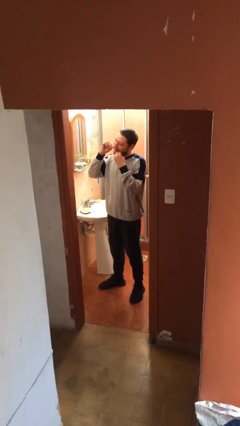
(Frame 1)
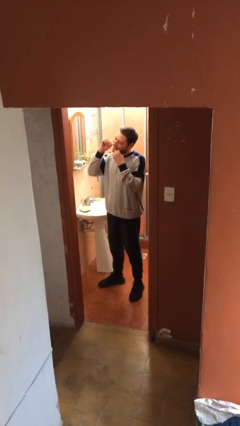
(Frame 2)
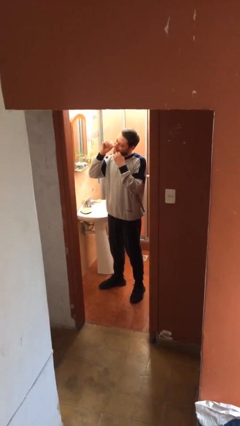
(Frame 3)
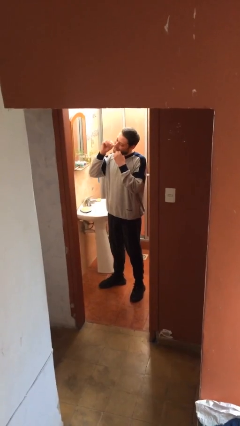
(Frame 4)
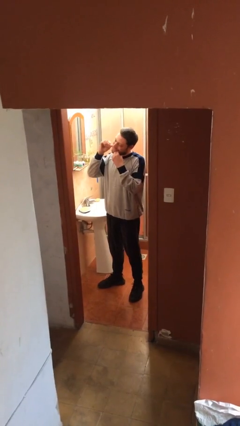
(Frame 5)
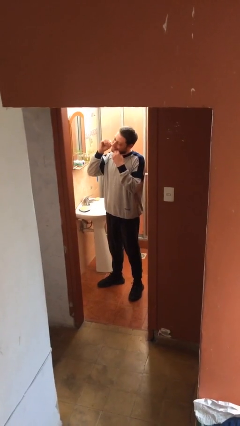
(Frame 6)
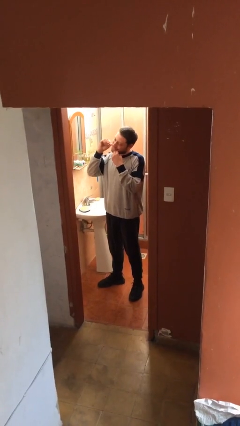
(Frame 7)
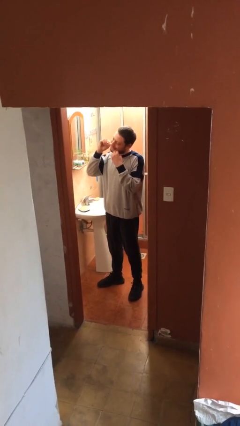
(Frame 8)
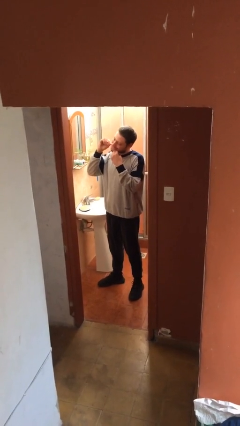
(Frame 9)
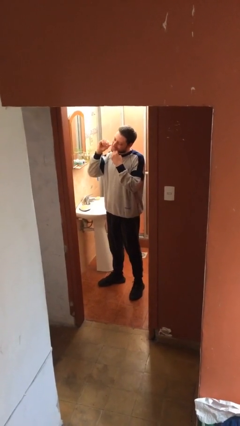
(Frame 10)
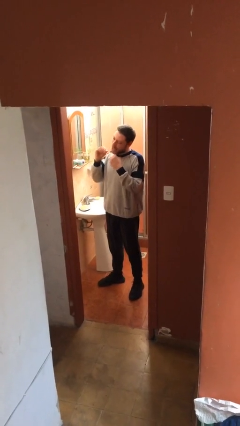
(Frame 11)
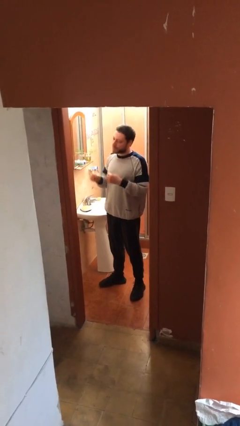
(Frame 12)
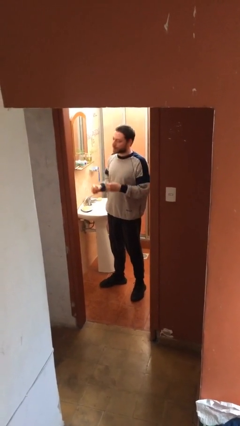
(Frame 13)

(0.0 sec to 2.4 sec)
person flosses

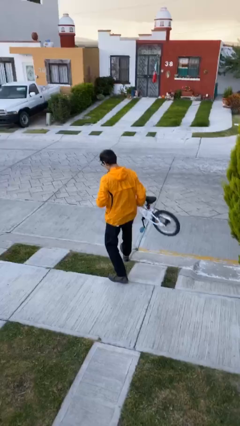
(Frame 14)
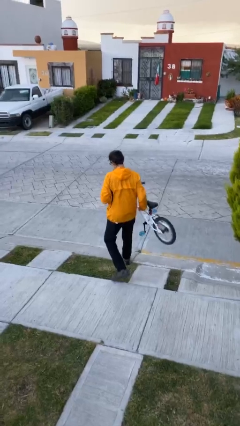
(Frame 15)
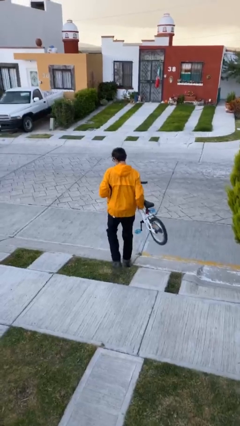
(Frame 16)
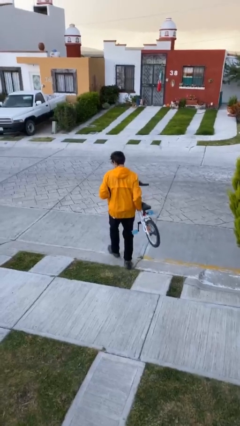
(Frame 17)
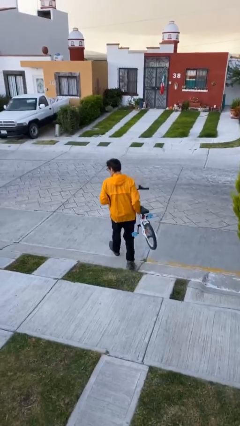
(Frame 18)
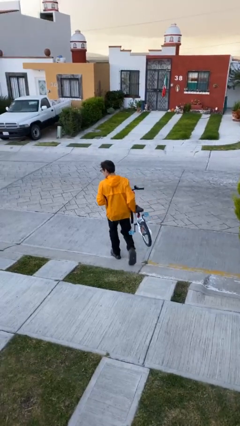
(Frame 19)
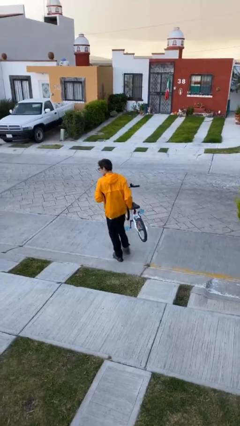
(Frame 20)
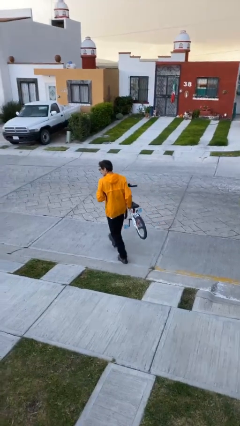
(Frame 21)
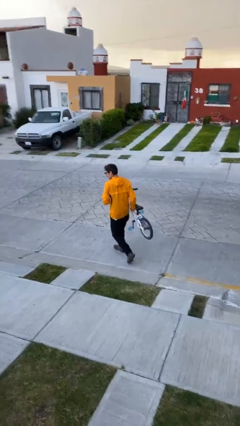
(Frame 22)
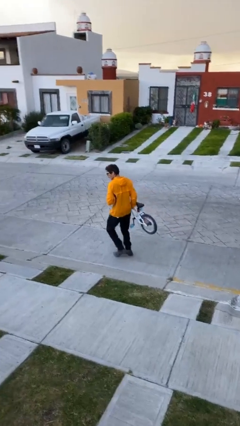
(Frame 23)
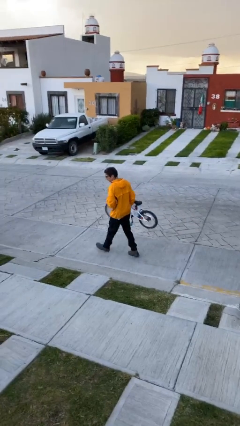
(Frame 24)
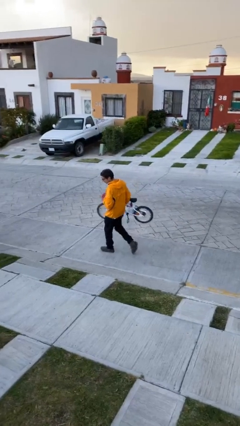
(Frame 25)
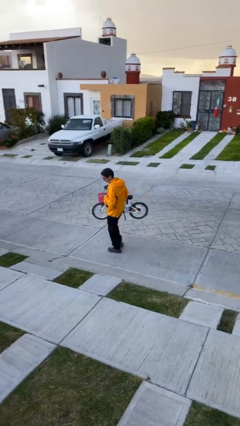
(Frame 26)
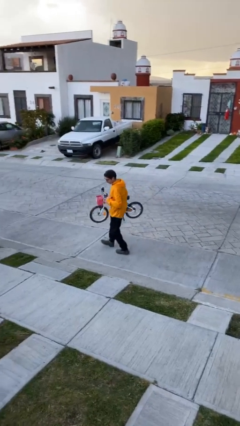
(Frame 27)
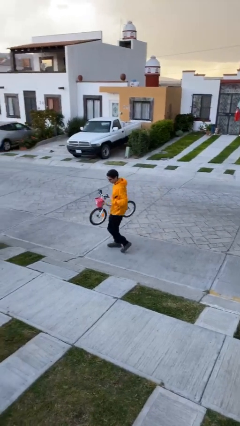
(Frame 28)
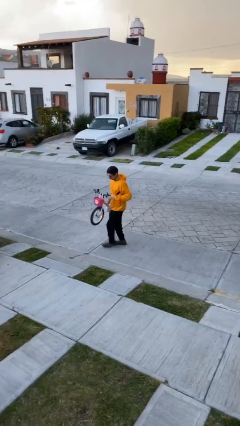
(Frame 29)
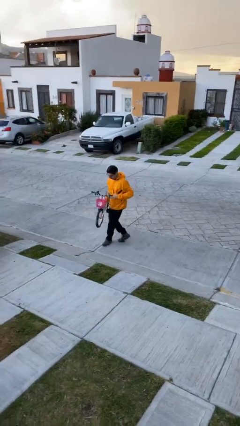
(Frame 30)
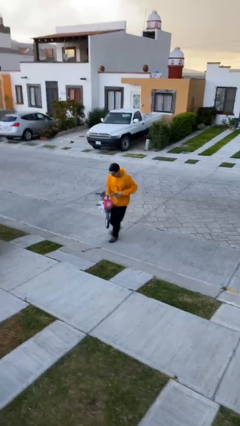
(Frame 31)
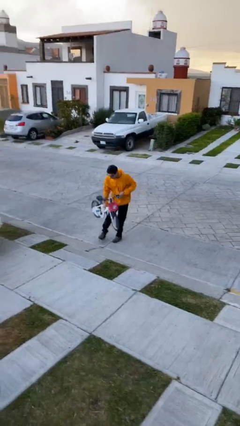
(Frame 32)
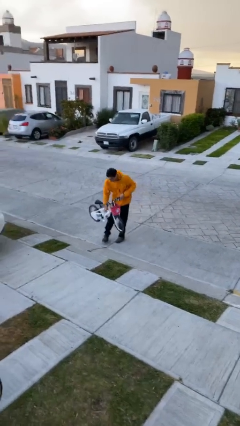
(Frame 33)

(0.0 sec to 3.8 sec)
person carries heavy object

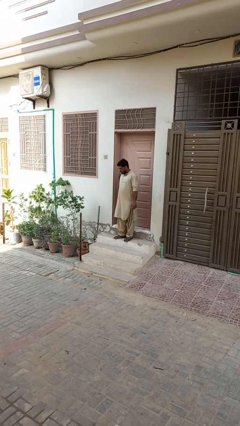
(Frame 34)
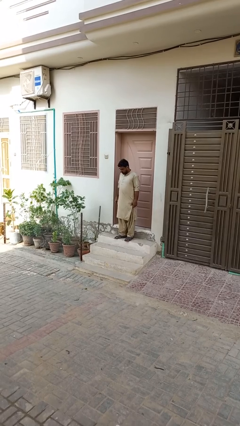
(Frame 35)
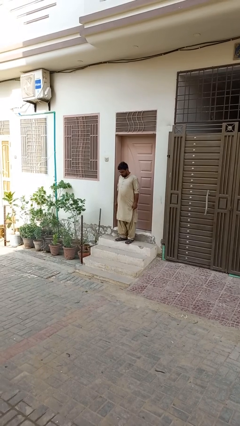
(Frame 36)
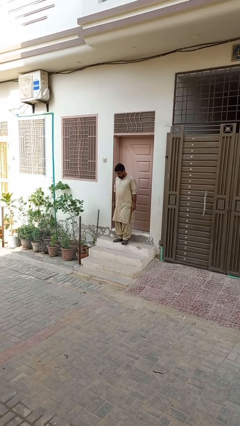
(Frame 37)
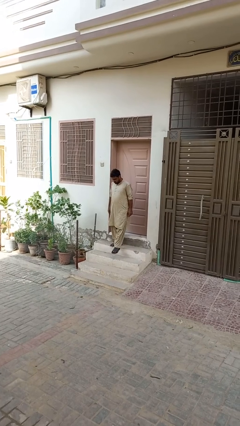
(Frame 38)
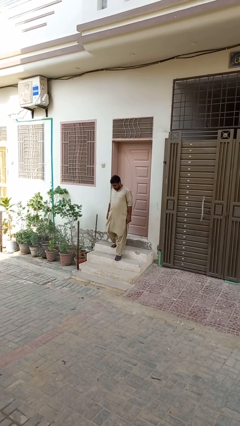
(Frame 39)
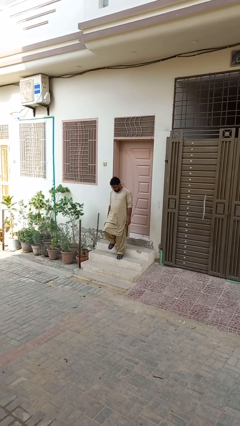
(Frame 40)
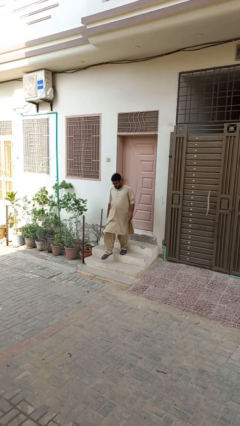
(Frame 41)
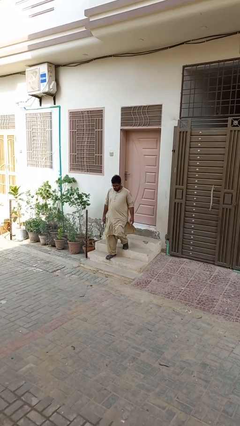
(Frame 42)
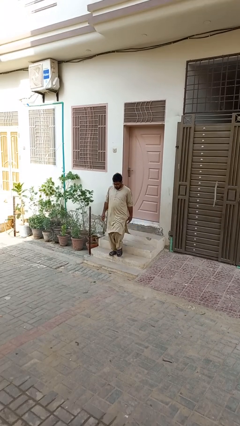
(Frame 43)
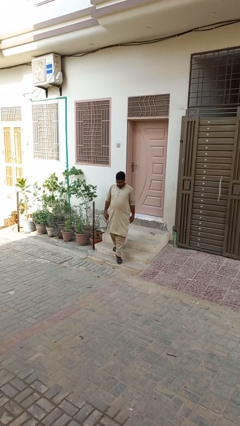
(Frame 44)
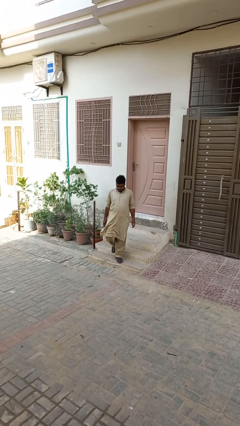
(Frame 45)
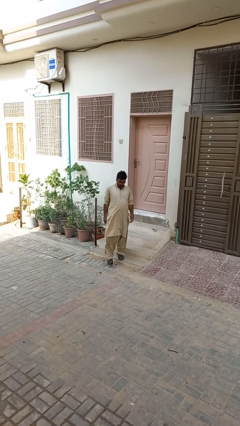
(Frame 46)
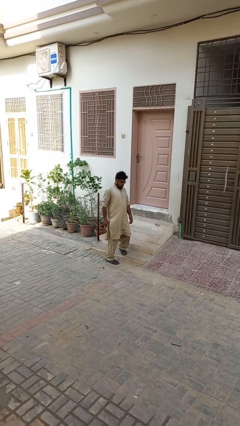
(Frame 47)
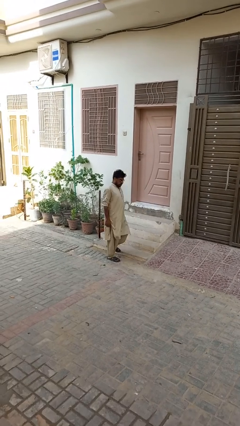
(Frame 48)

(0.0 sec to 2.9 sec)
person climbs down stairs

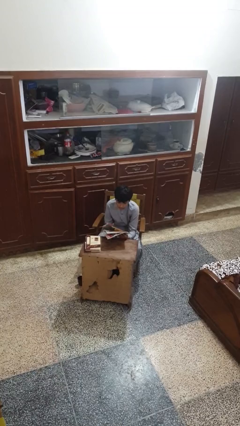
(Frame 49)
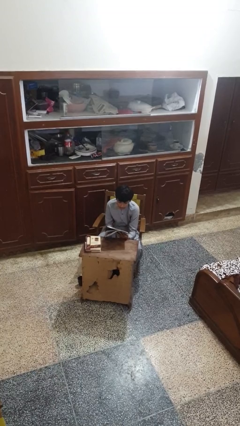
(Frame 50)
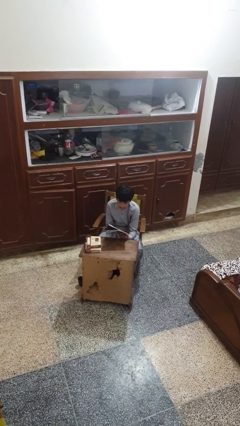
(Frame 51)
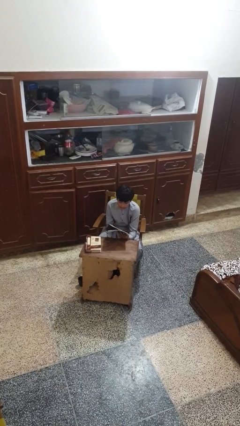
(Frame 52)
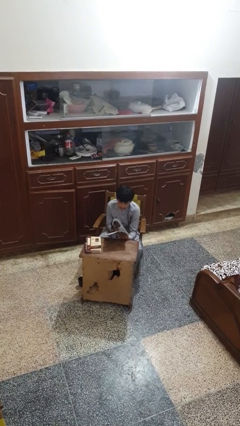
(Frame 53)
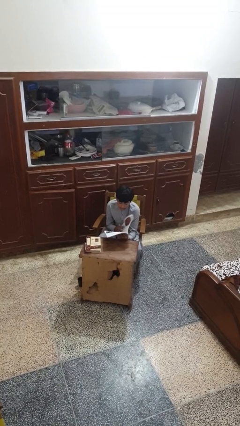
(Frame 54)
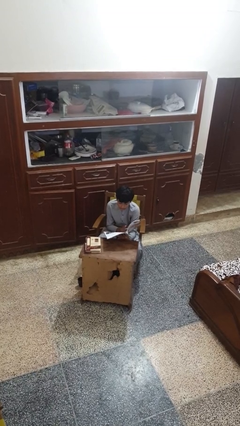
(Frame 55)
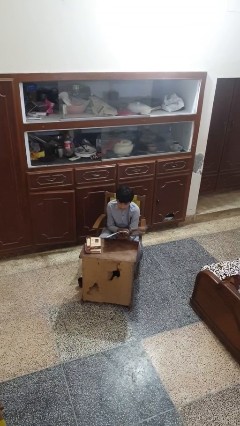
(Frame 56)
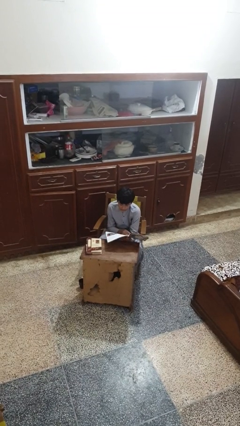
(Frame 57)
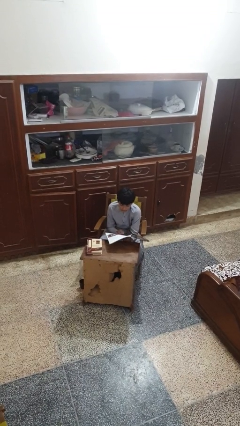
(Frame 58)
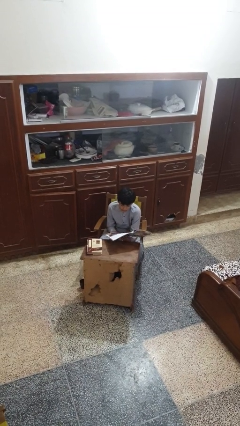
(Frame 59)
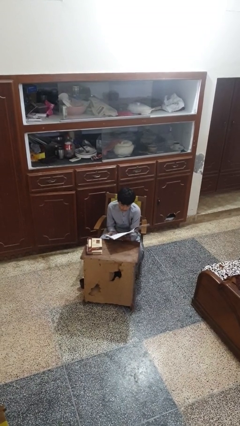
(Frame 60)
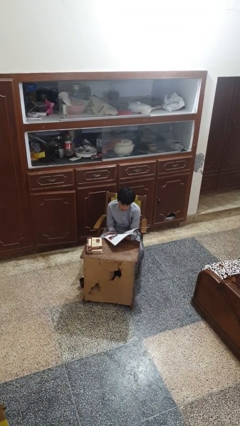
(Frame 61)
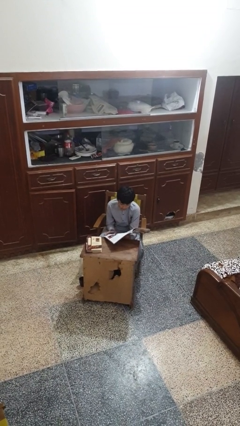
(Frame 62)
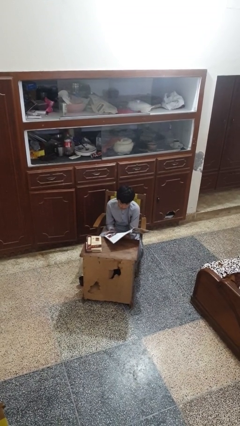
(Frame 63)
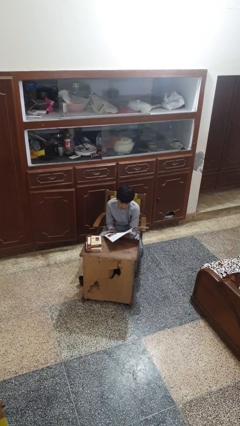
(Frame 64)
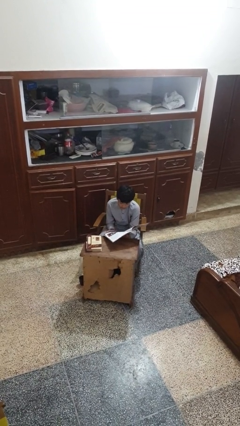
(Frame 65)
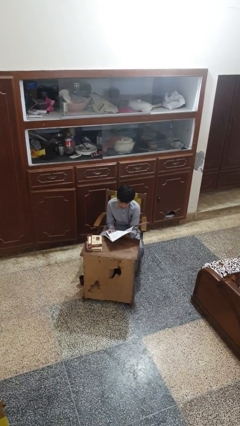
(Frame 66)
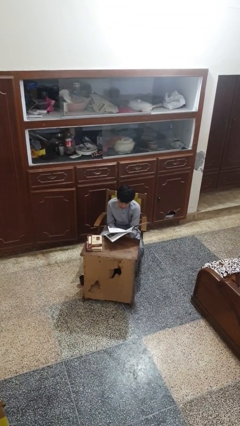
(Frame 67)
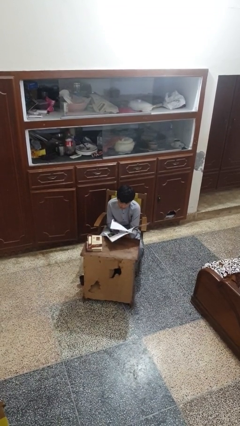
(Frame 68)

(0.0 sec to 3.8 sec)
person reads magazine

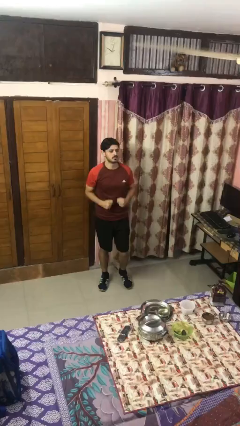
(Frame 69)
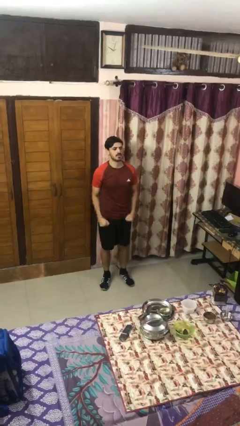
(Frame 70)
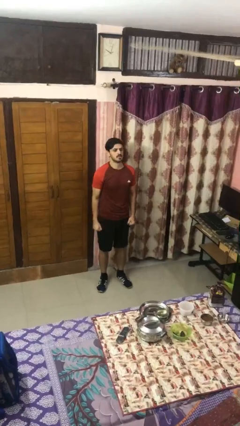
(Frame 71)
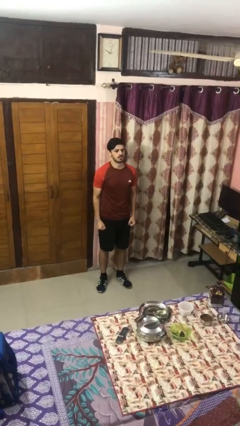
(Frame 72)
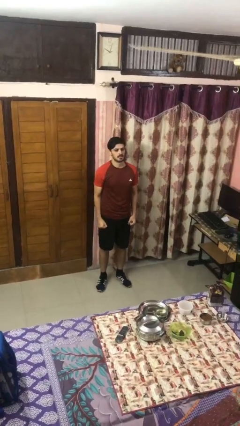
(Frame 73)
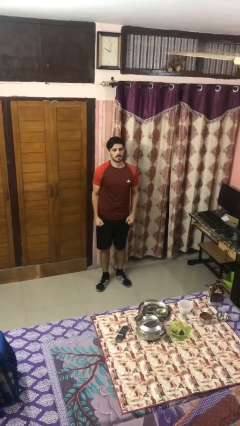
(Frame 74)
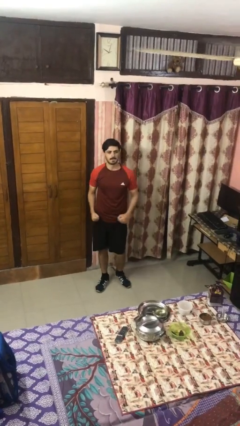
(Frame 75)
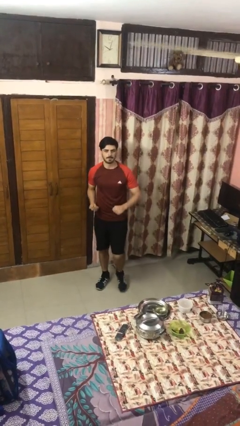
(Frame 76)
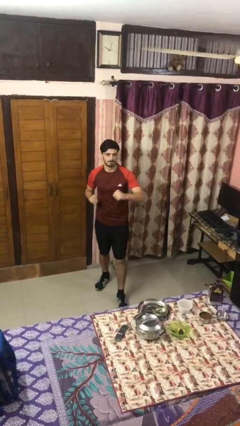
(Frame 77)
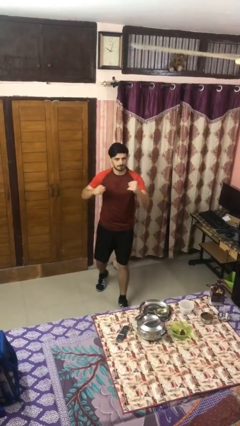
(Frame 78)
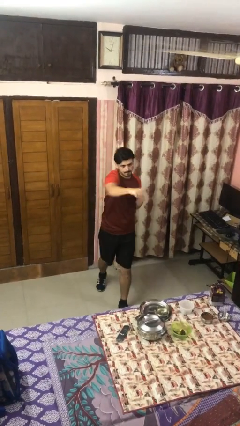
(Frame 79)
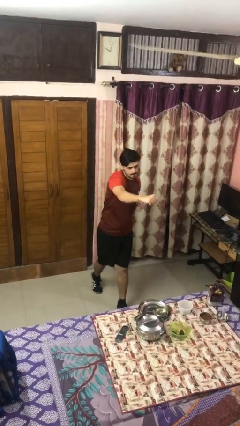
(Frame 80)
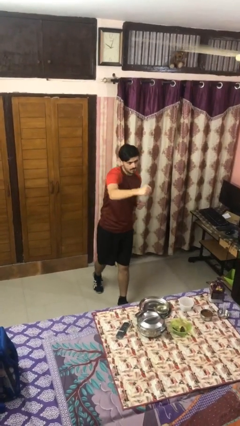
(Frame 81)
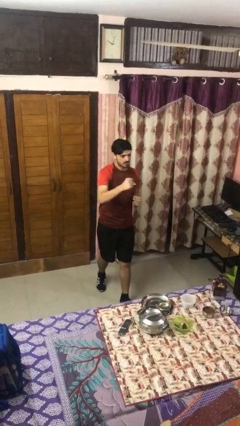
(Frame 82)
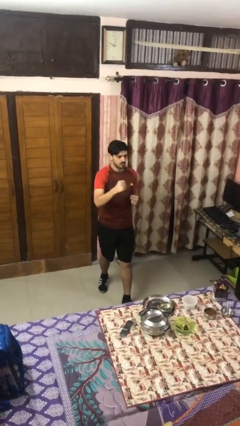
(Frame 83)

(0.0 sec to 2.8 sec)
person punches

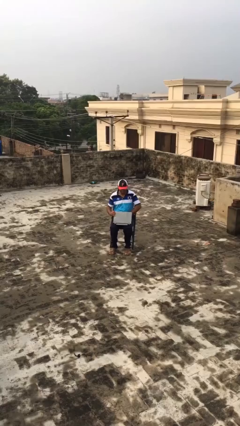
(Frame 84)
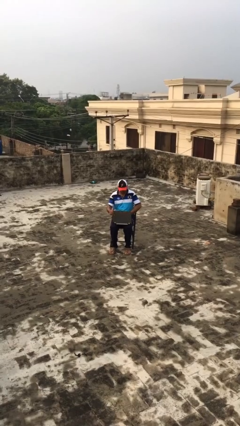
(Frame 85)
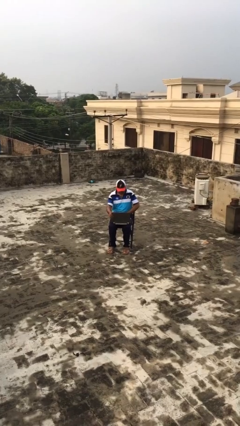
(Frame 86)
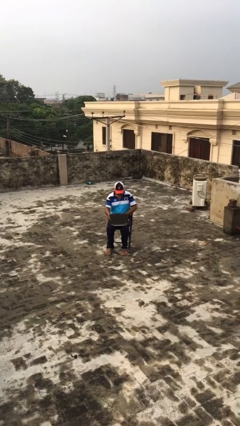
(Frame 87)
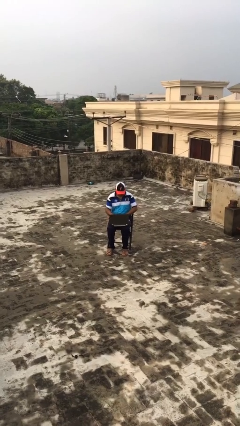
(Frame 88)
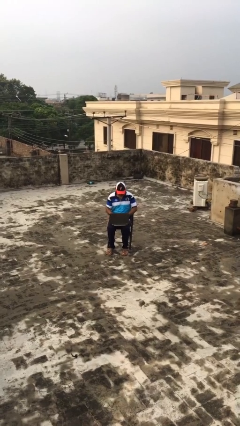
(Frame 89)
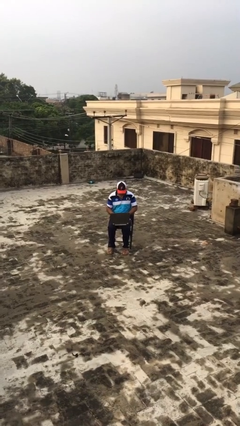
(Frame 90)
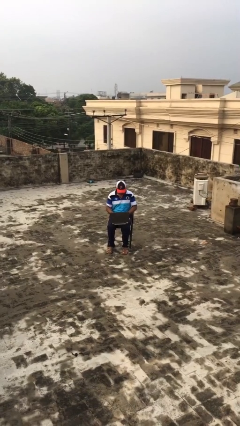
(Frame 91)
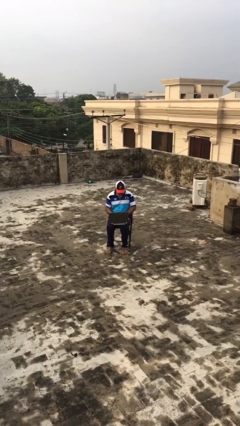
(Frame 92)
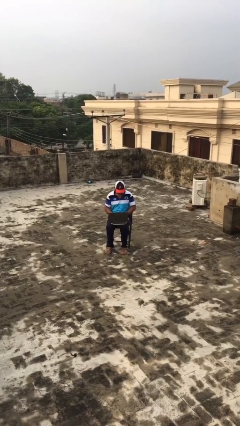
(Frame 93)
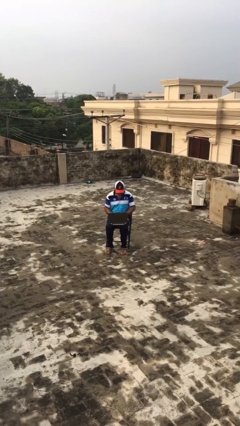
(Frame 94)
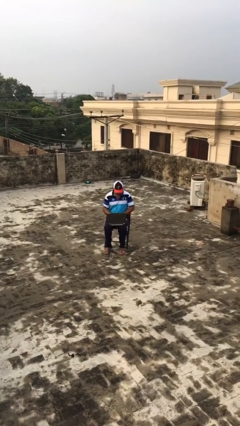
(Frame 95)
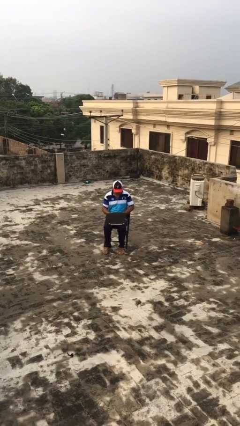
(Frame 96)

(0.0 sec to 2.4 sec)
person interacts with laptop
